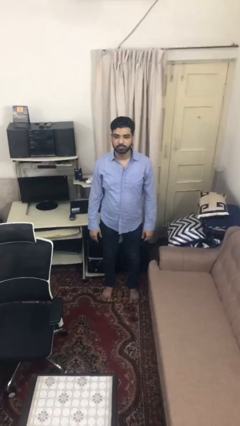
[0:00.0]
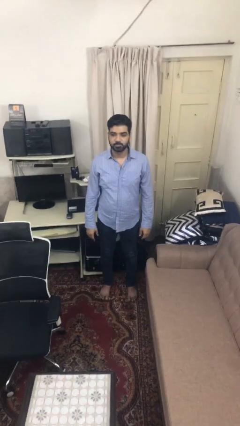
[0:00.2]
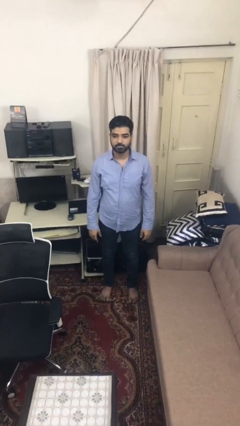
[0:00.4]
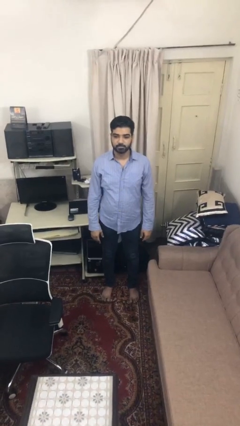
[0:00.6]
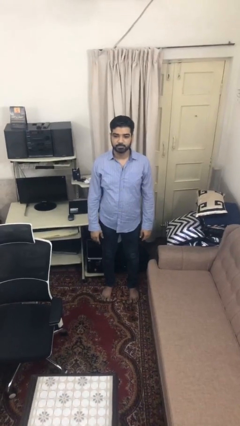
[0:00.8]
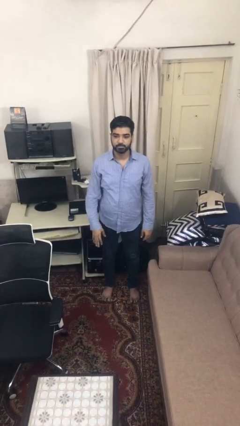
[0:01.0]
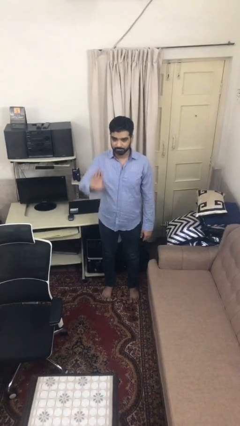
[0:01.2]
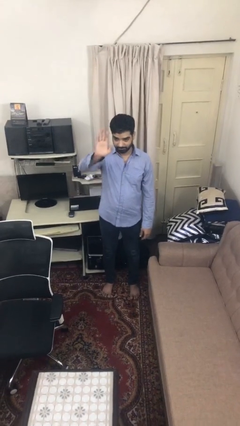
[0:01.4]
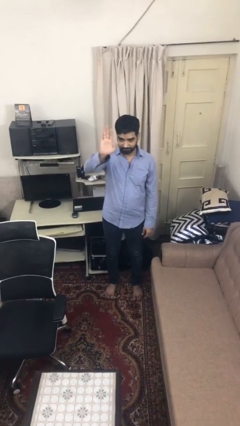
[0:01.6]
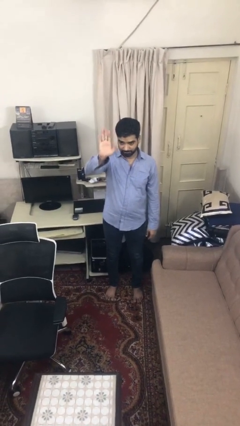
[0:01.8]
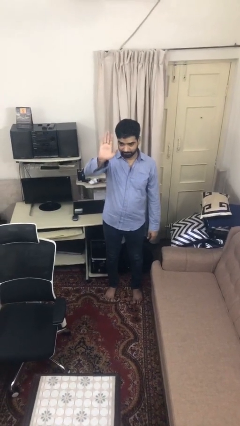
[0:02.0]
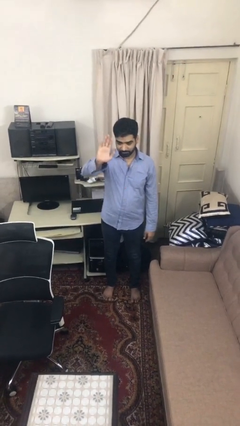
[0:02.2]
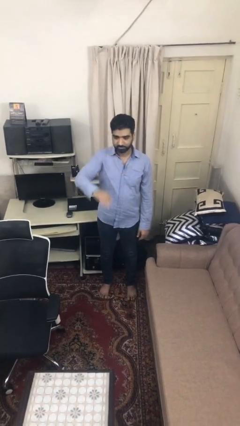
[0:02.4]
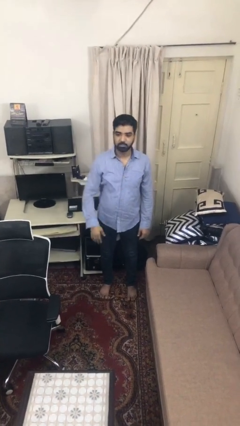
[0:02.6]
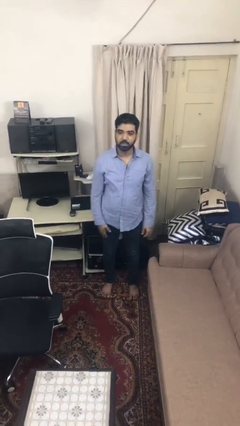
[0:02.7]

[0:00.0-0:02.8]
person waves at person

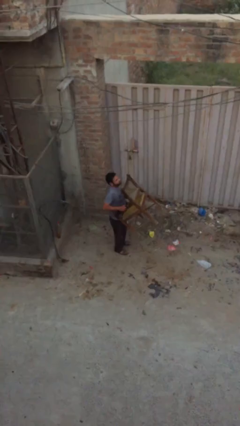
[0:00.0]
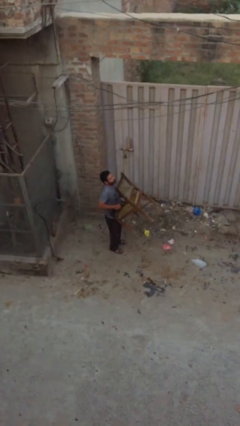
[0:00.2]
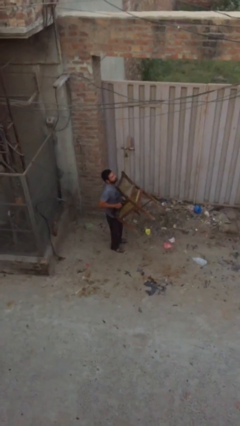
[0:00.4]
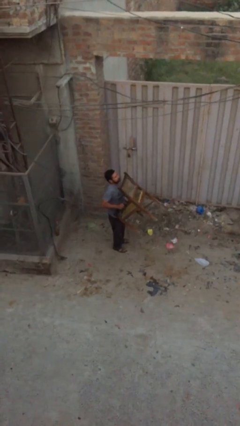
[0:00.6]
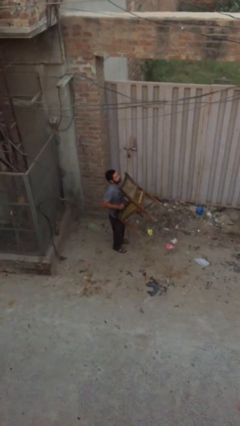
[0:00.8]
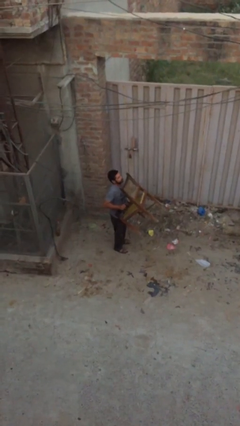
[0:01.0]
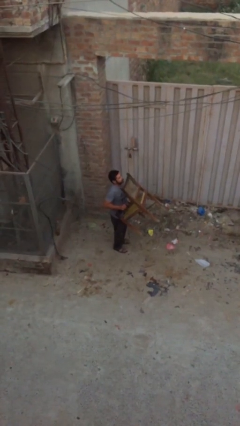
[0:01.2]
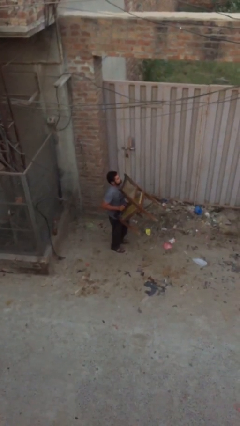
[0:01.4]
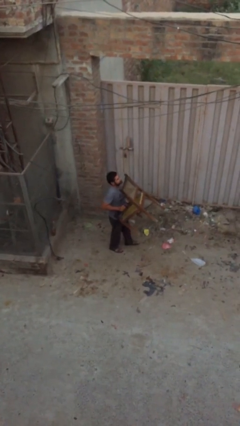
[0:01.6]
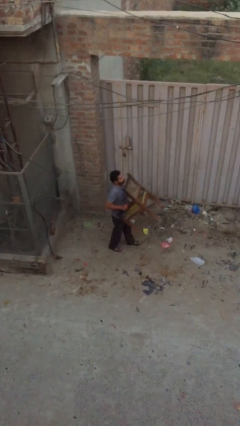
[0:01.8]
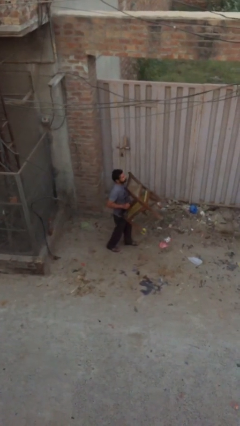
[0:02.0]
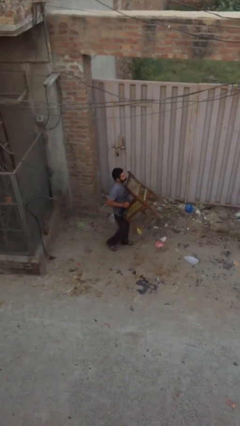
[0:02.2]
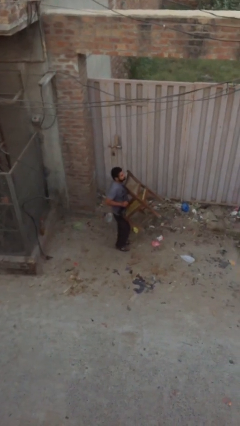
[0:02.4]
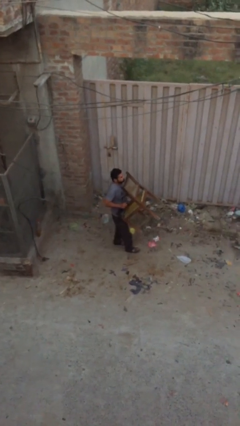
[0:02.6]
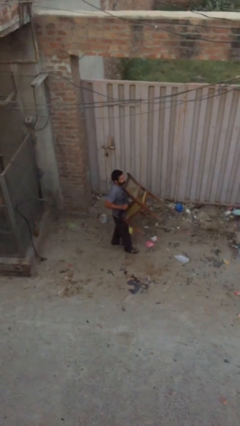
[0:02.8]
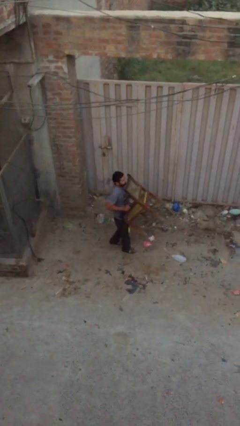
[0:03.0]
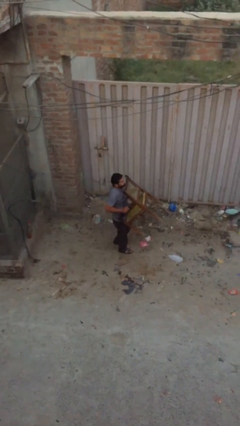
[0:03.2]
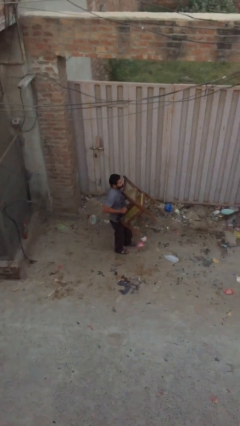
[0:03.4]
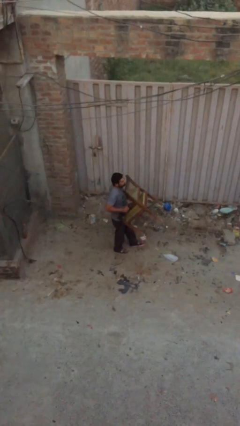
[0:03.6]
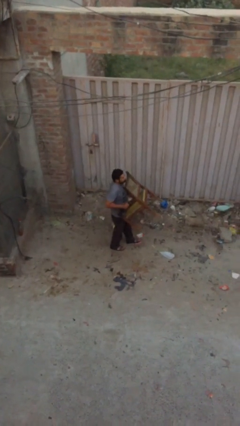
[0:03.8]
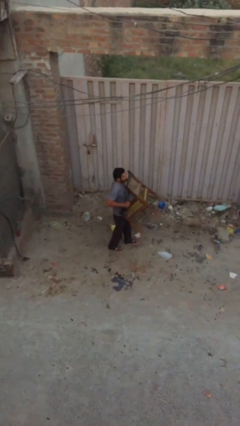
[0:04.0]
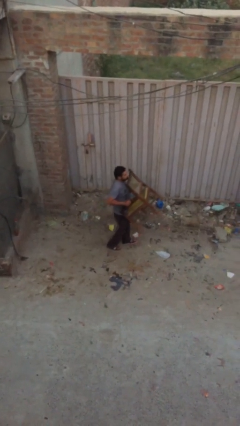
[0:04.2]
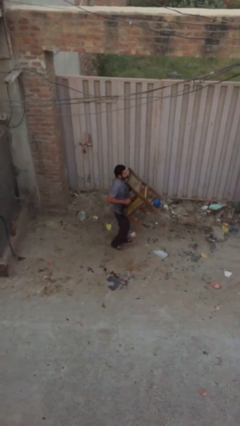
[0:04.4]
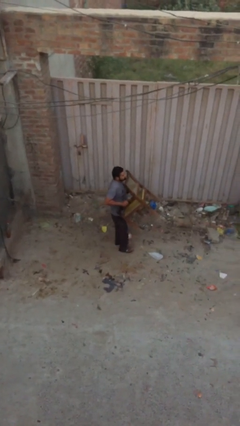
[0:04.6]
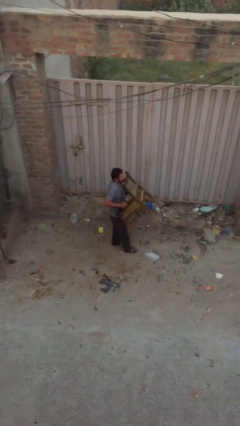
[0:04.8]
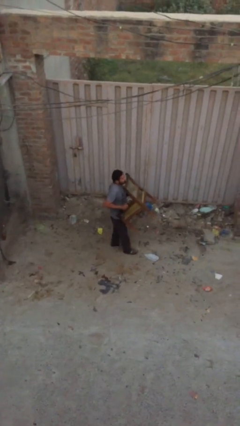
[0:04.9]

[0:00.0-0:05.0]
person carries heavy object

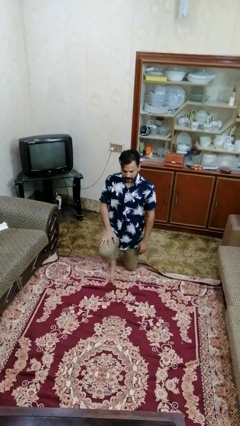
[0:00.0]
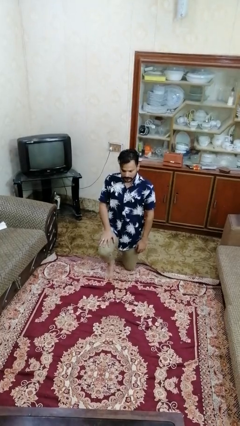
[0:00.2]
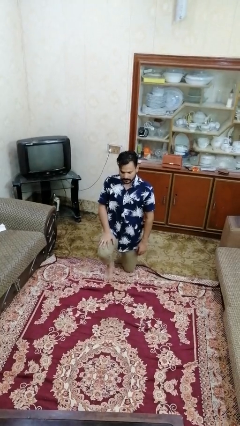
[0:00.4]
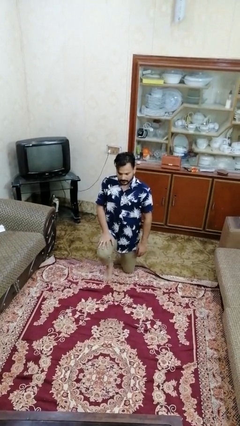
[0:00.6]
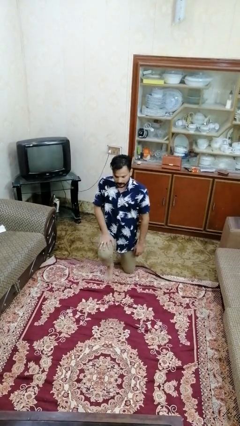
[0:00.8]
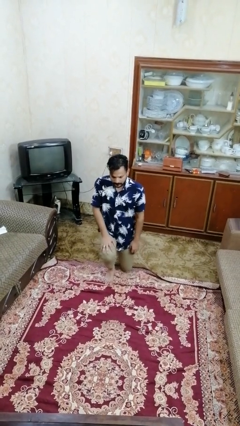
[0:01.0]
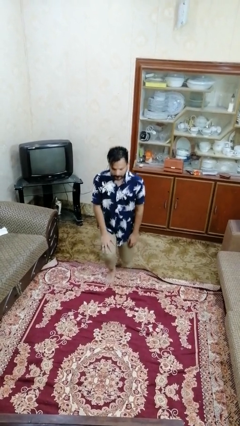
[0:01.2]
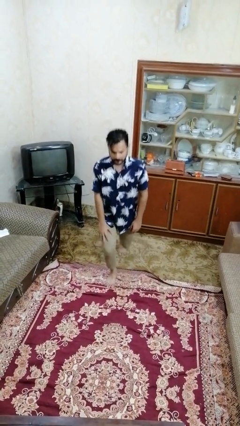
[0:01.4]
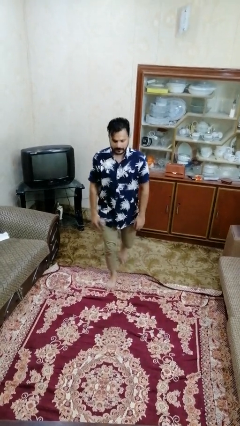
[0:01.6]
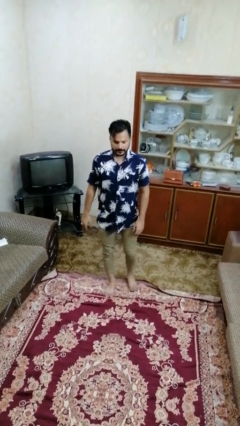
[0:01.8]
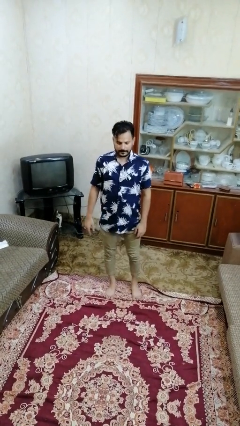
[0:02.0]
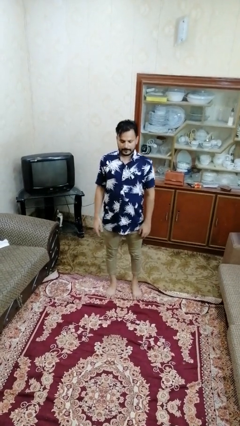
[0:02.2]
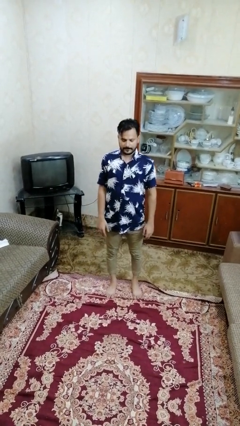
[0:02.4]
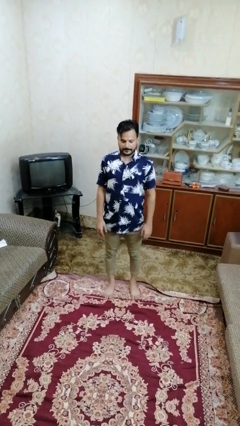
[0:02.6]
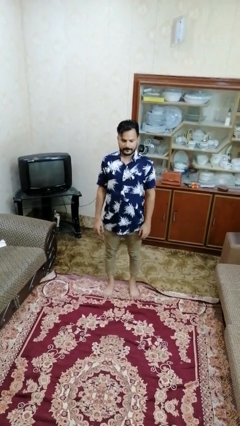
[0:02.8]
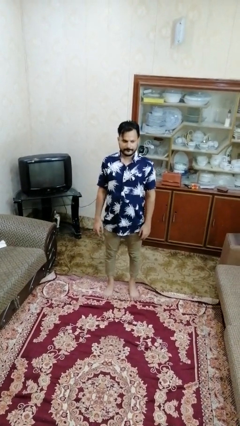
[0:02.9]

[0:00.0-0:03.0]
person stands up from floor

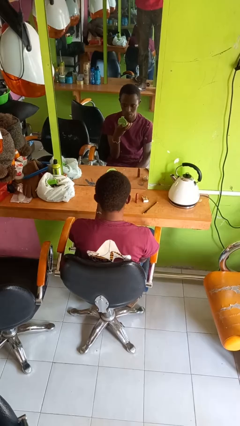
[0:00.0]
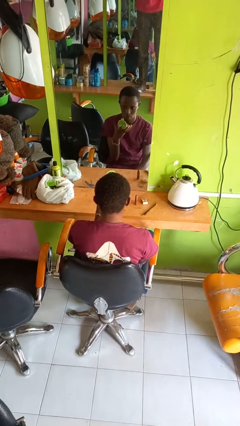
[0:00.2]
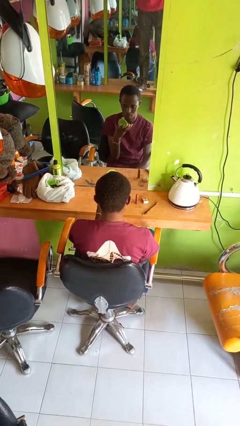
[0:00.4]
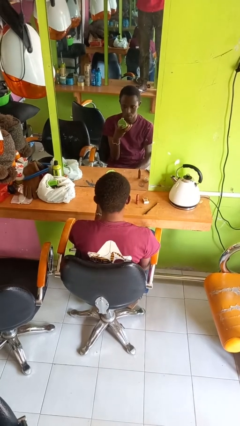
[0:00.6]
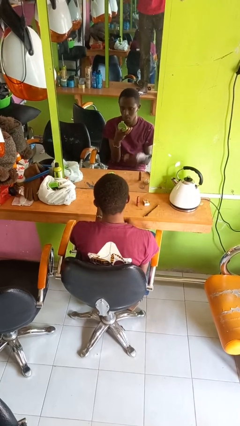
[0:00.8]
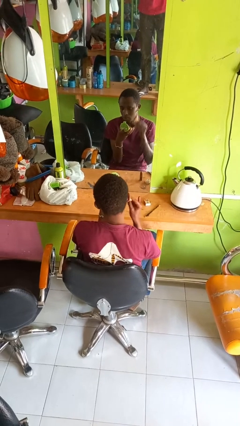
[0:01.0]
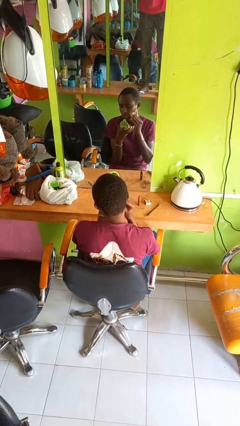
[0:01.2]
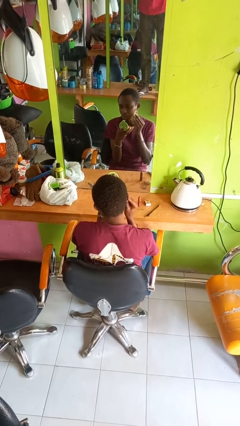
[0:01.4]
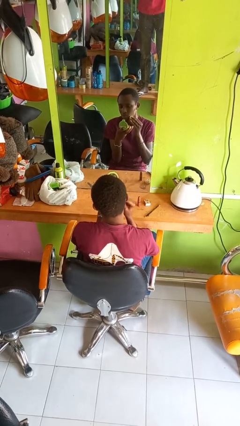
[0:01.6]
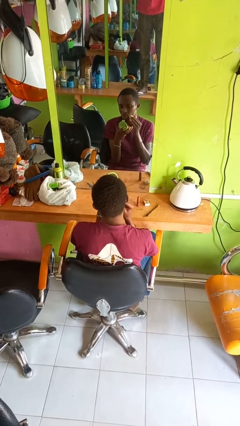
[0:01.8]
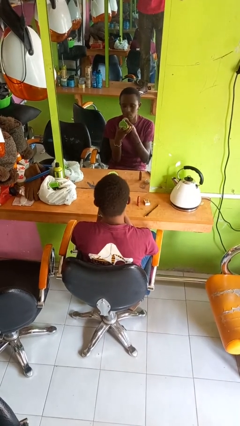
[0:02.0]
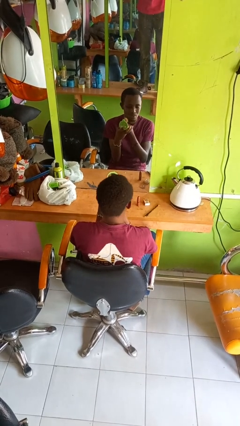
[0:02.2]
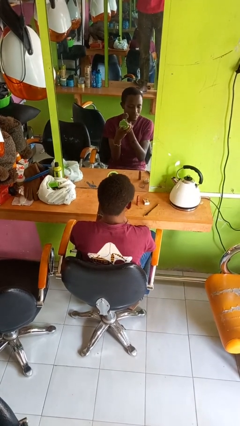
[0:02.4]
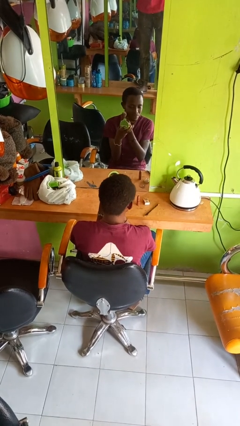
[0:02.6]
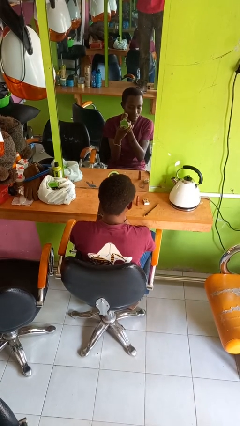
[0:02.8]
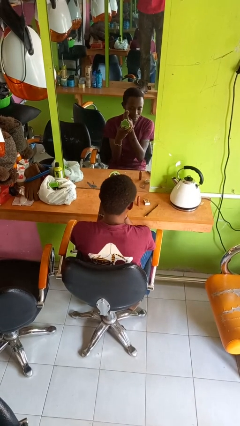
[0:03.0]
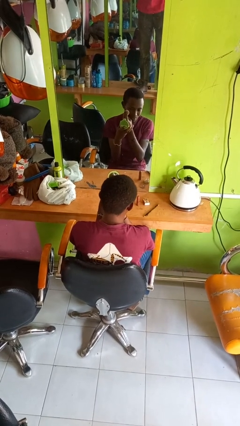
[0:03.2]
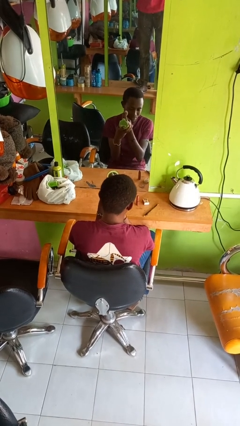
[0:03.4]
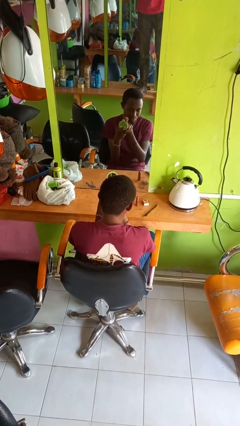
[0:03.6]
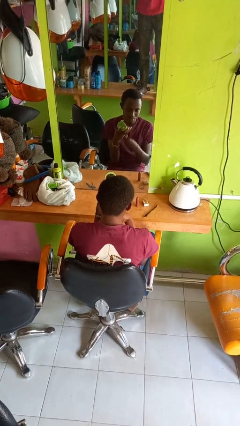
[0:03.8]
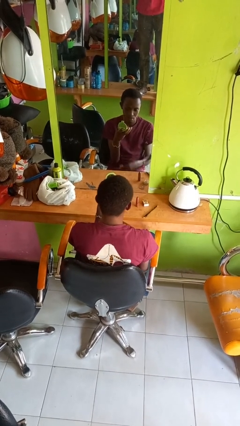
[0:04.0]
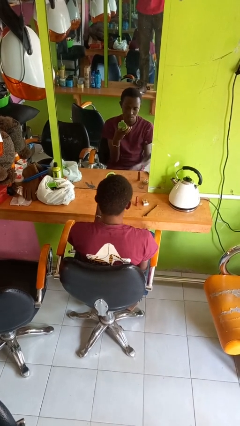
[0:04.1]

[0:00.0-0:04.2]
person applies foundation makeup

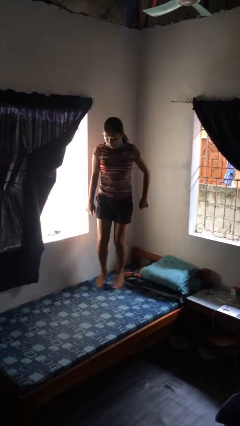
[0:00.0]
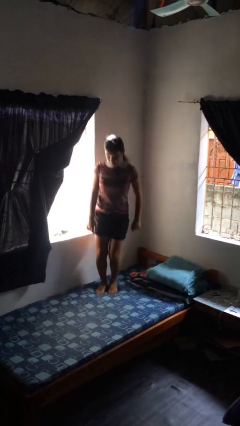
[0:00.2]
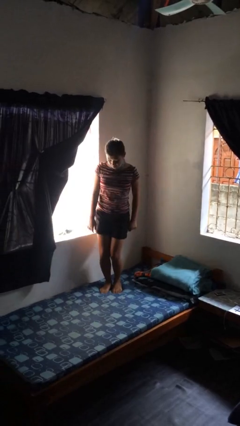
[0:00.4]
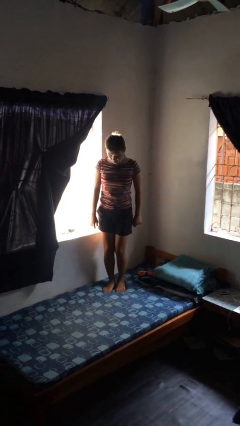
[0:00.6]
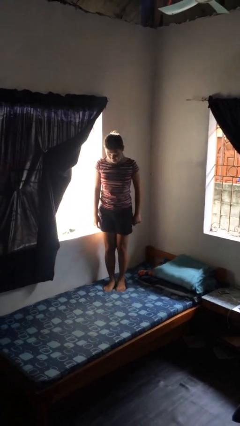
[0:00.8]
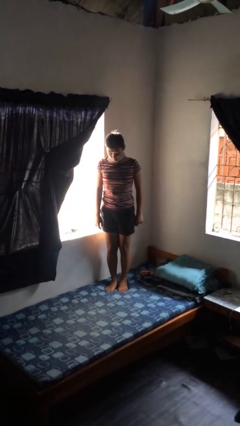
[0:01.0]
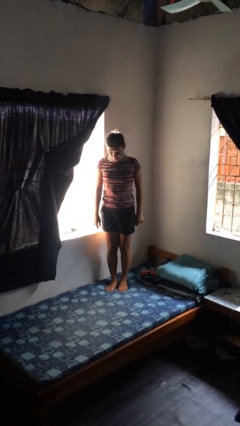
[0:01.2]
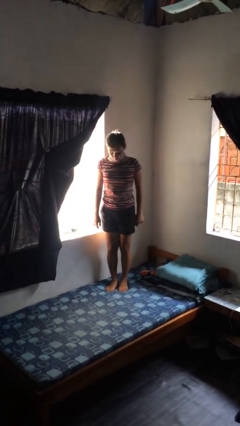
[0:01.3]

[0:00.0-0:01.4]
person jumps on bed

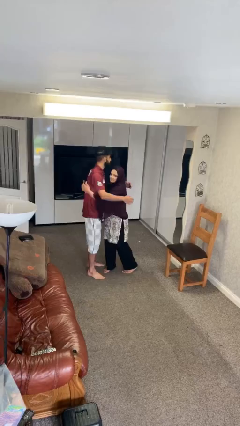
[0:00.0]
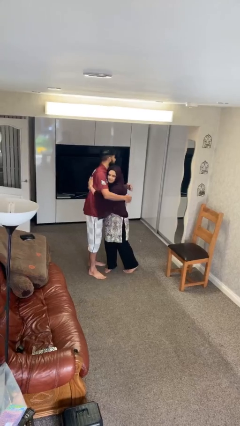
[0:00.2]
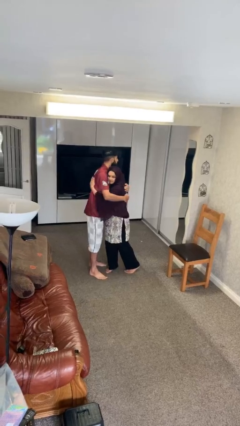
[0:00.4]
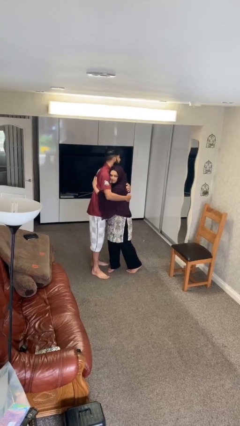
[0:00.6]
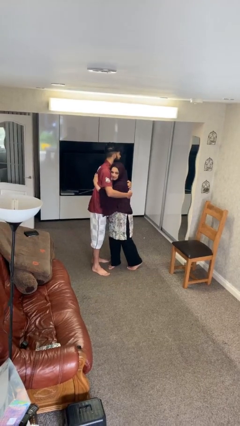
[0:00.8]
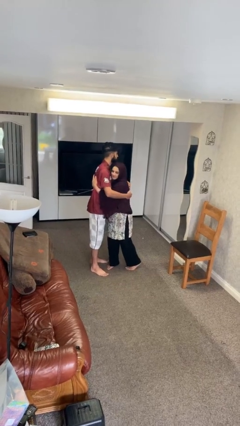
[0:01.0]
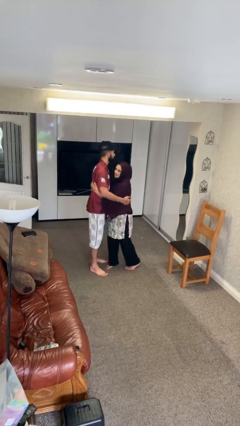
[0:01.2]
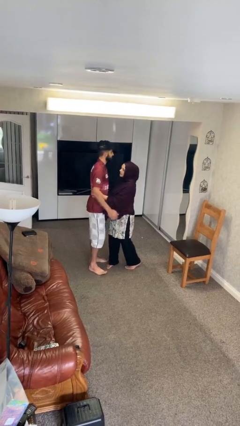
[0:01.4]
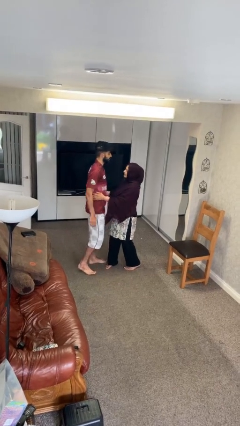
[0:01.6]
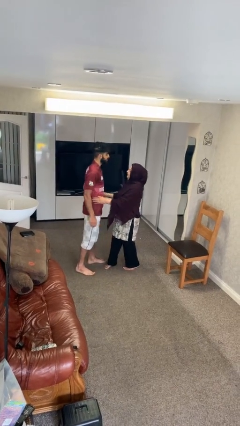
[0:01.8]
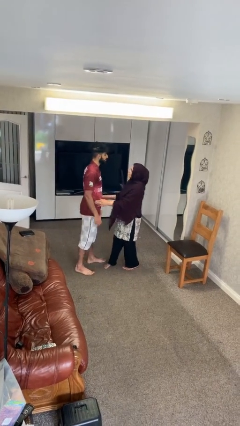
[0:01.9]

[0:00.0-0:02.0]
person embraces person
